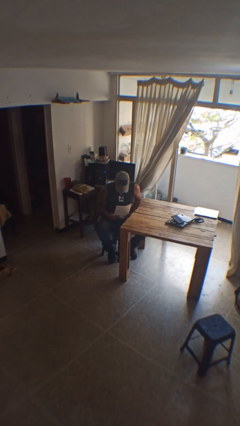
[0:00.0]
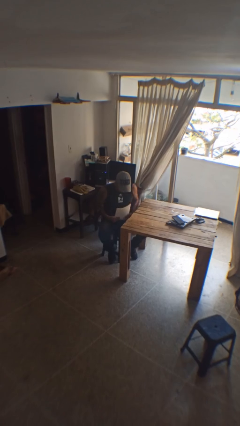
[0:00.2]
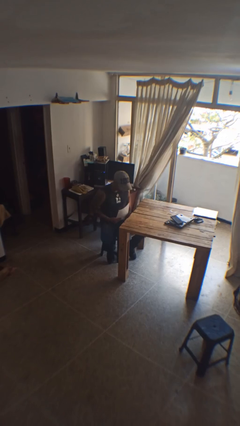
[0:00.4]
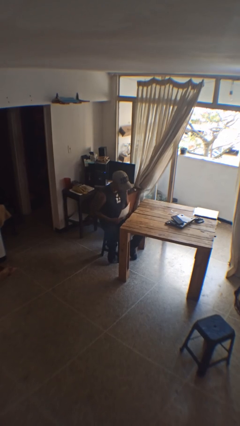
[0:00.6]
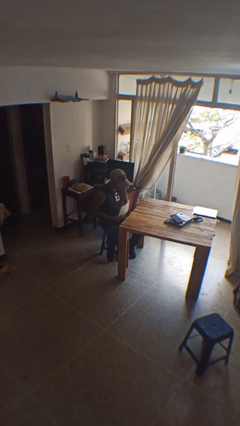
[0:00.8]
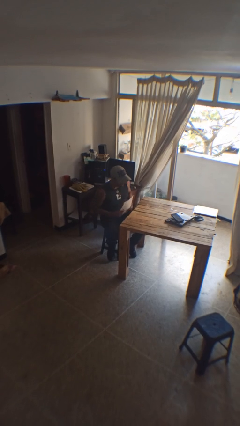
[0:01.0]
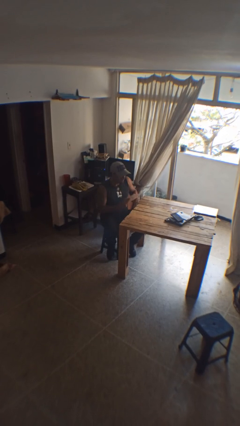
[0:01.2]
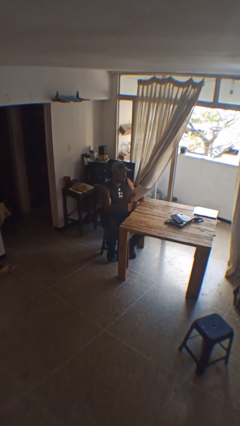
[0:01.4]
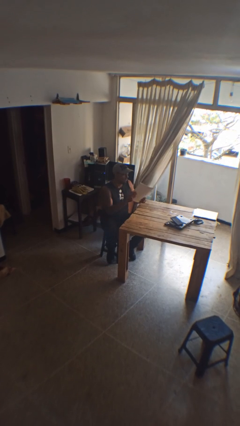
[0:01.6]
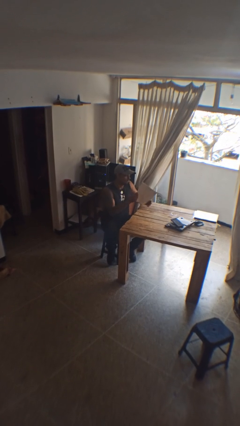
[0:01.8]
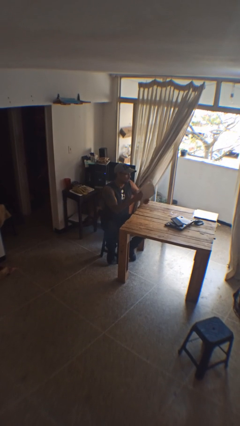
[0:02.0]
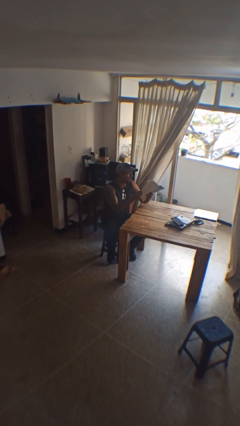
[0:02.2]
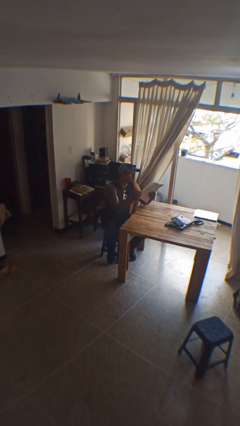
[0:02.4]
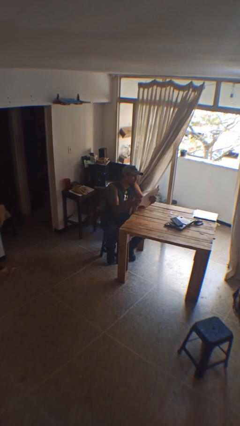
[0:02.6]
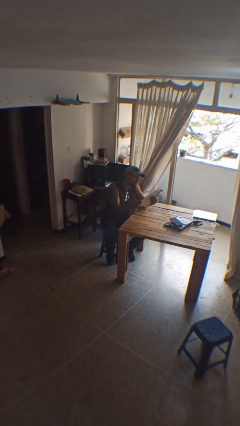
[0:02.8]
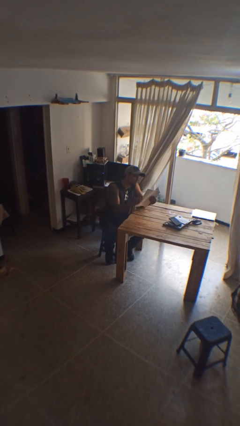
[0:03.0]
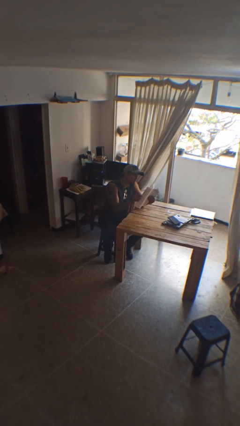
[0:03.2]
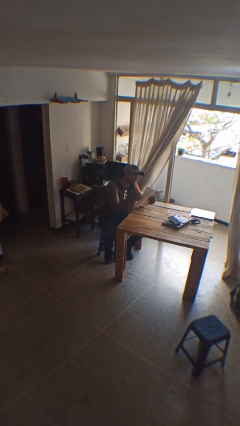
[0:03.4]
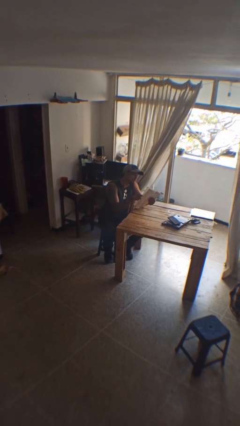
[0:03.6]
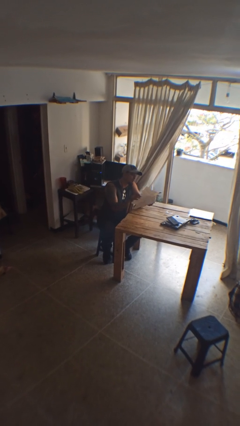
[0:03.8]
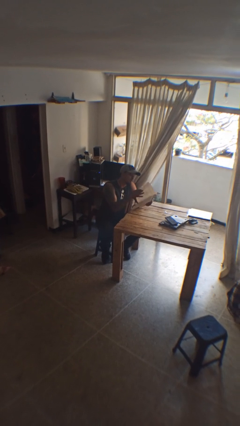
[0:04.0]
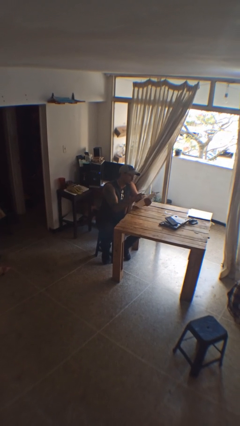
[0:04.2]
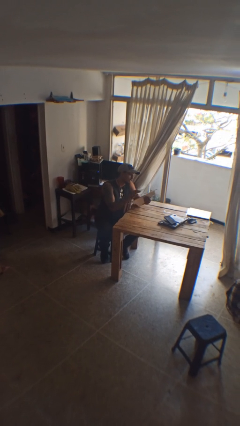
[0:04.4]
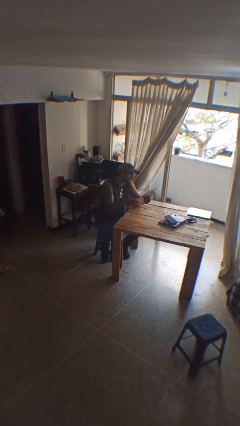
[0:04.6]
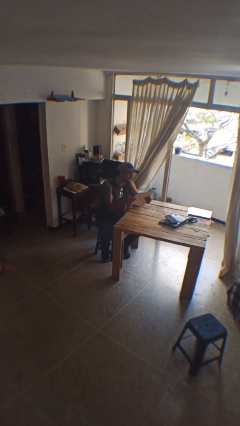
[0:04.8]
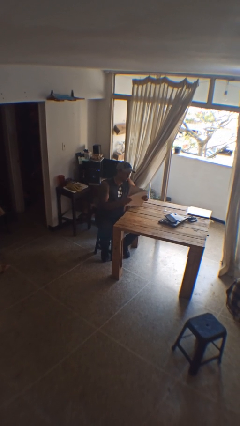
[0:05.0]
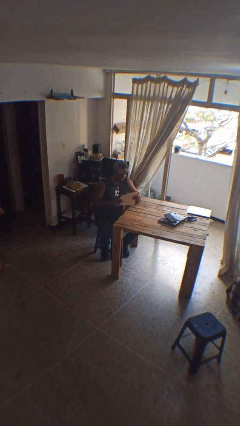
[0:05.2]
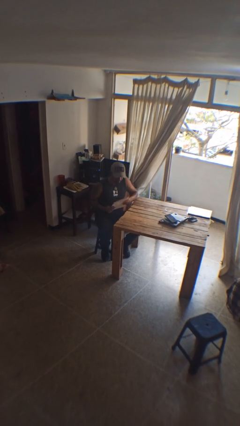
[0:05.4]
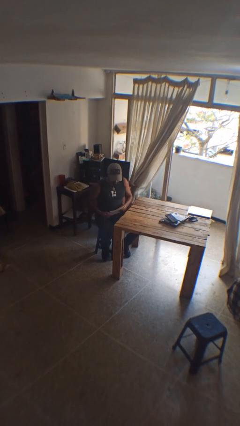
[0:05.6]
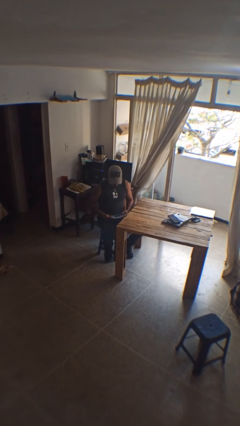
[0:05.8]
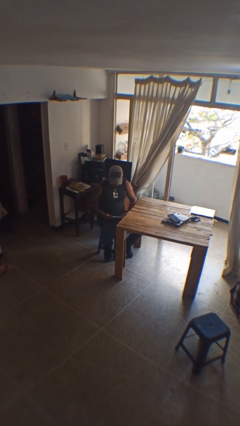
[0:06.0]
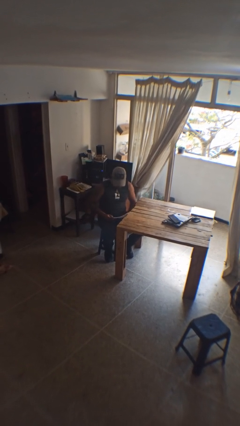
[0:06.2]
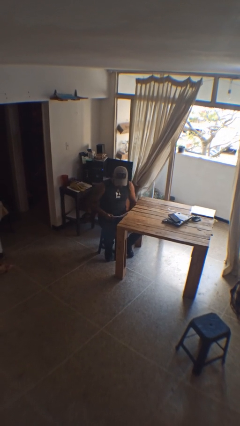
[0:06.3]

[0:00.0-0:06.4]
person reads document

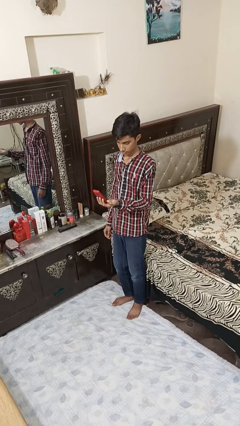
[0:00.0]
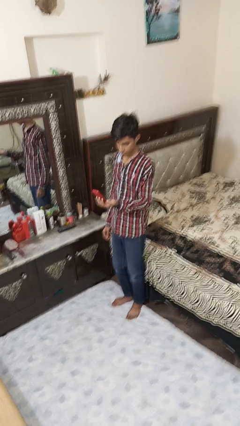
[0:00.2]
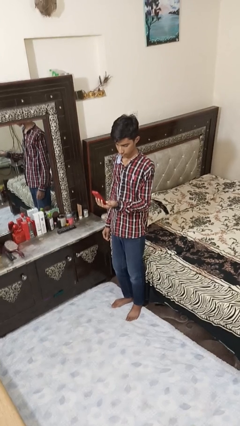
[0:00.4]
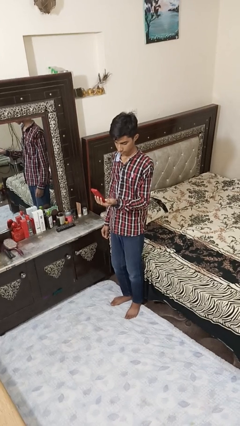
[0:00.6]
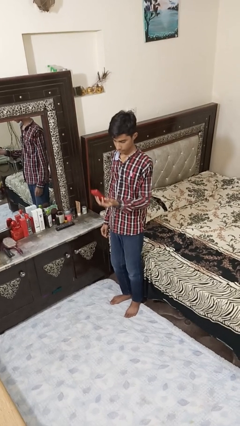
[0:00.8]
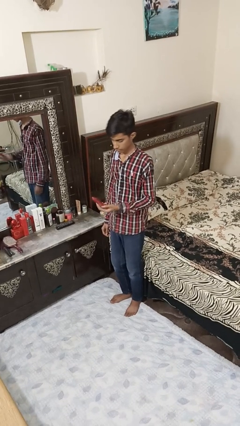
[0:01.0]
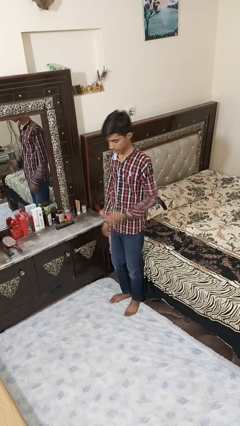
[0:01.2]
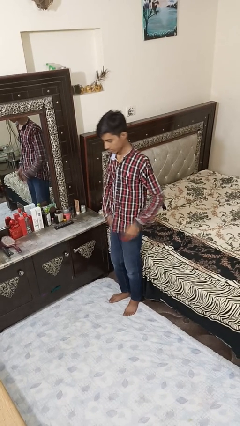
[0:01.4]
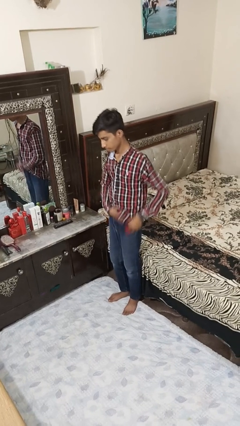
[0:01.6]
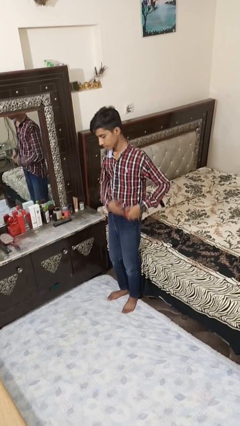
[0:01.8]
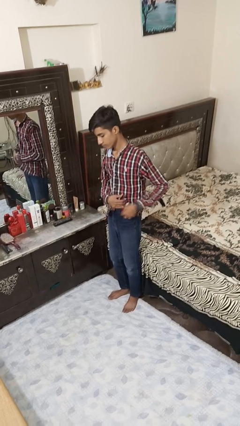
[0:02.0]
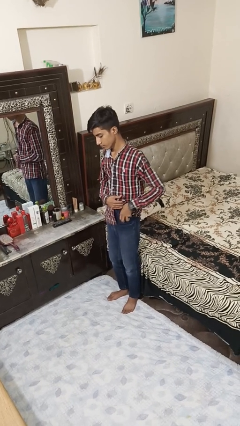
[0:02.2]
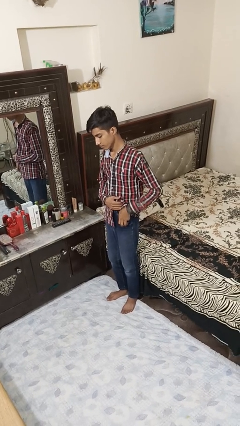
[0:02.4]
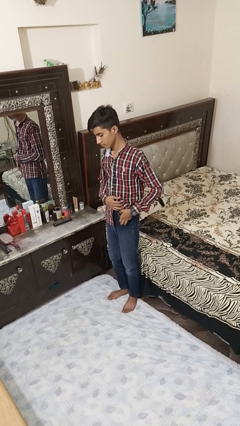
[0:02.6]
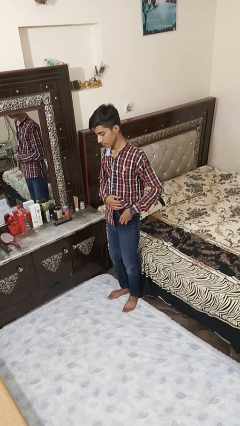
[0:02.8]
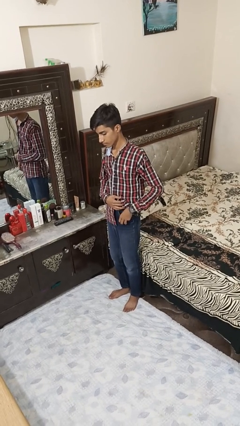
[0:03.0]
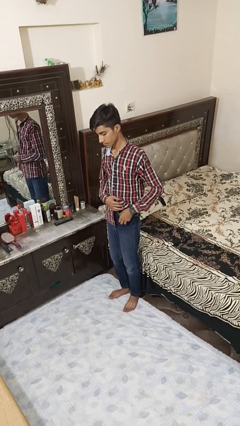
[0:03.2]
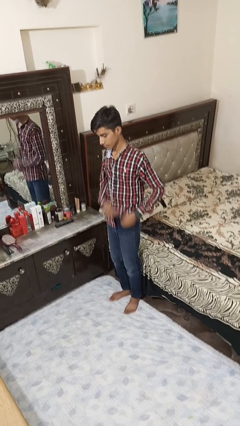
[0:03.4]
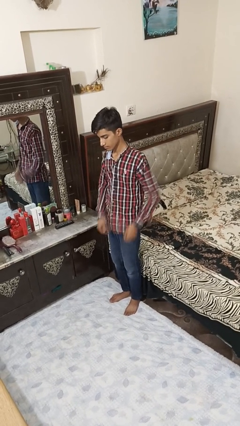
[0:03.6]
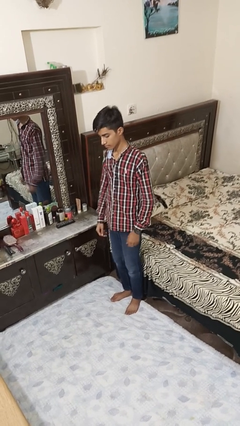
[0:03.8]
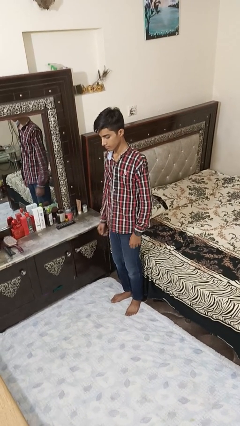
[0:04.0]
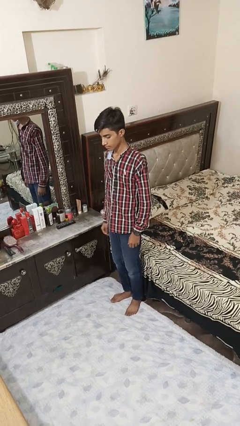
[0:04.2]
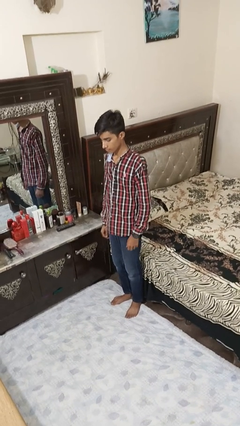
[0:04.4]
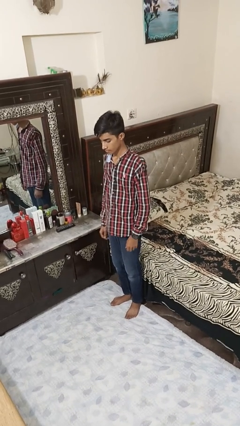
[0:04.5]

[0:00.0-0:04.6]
person puts phone into pocket

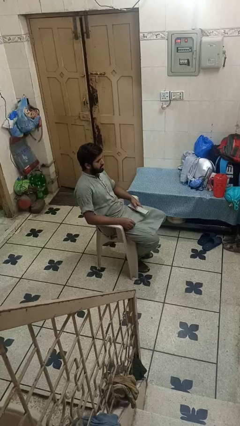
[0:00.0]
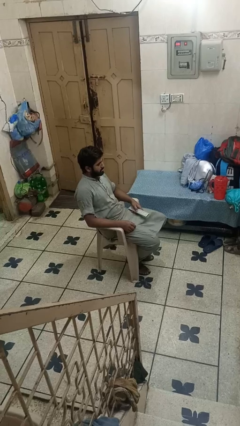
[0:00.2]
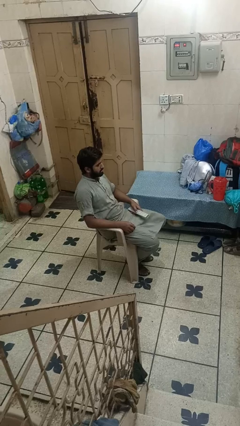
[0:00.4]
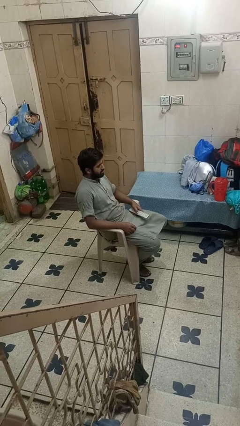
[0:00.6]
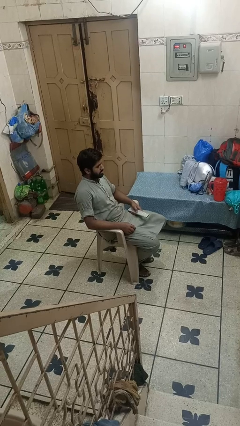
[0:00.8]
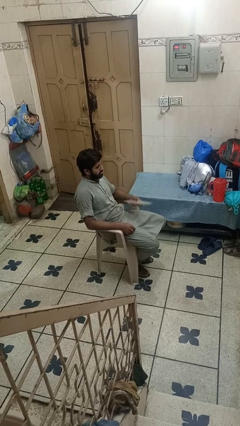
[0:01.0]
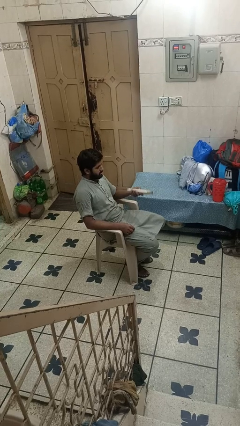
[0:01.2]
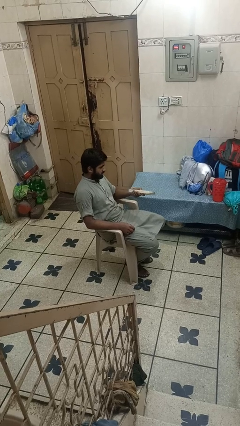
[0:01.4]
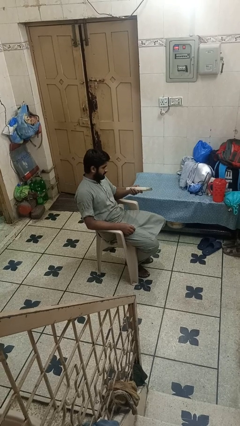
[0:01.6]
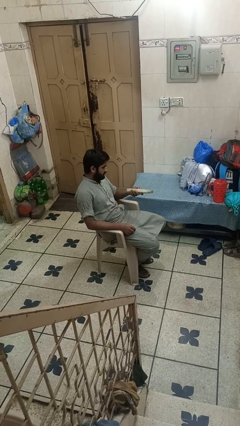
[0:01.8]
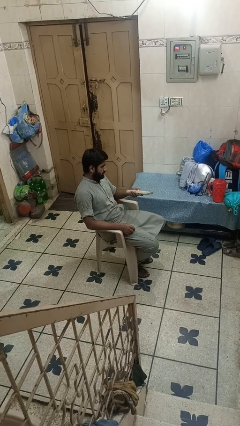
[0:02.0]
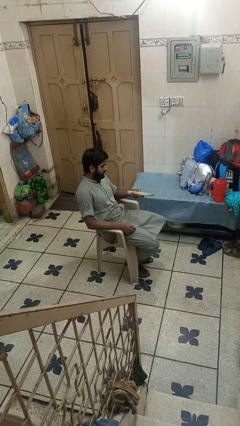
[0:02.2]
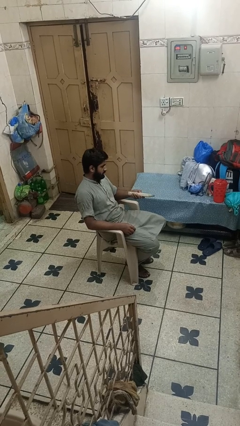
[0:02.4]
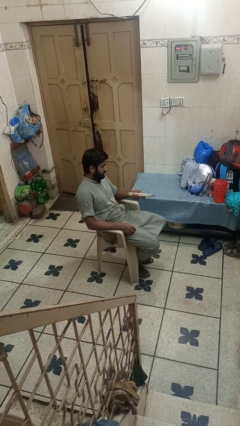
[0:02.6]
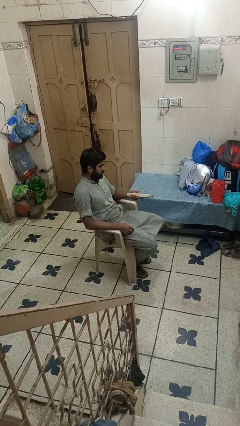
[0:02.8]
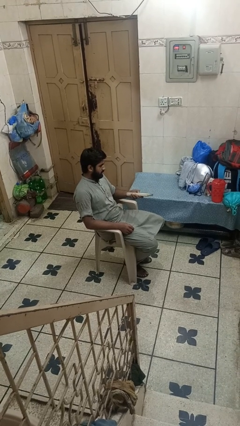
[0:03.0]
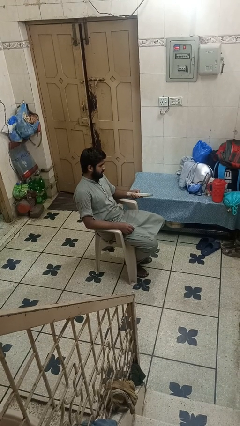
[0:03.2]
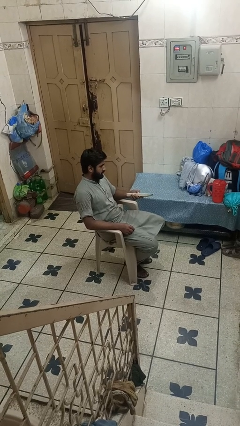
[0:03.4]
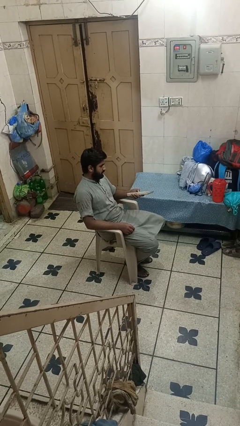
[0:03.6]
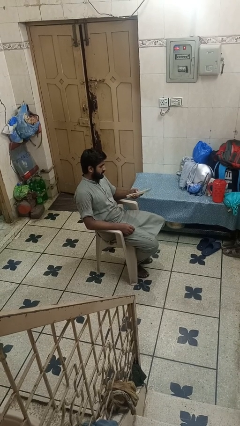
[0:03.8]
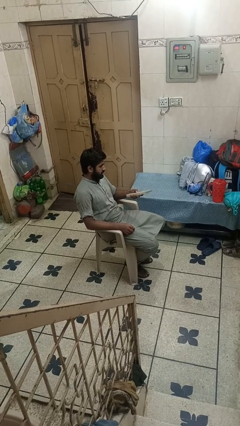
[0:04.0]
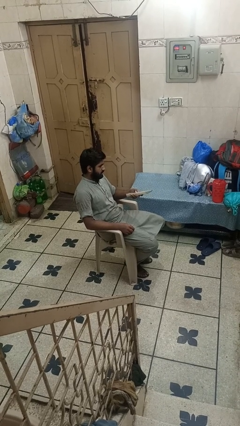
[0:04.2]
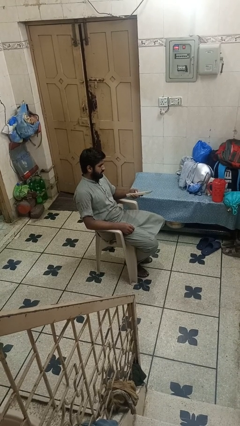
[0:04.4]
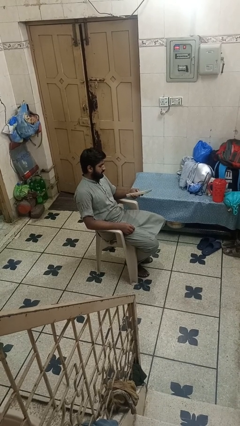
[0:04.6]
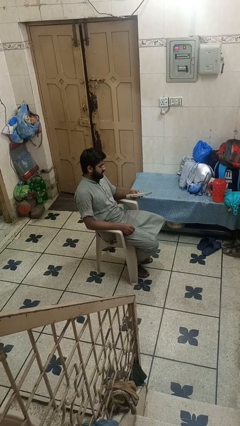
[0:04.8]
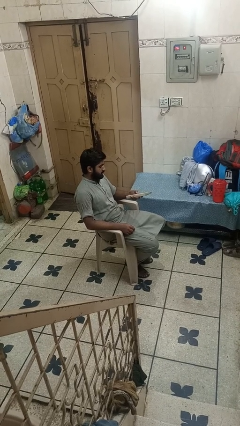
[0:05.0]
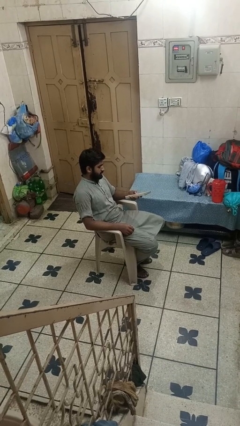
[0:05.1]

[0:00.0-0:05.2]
person uses television remote

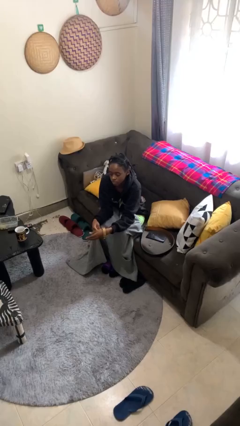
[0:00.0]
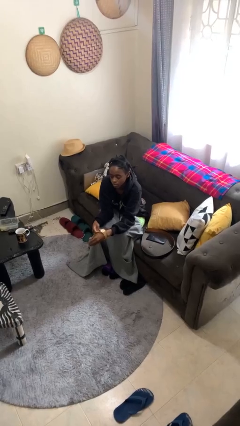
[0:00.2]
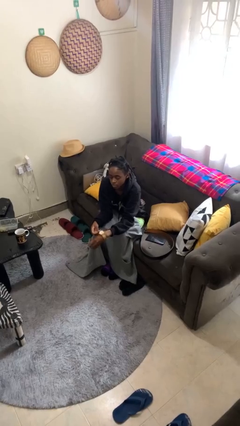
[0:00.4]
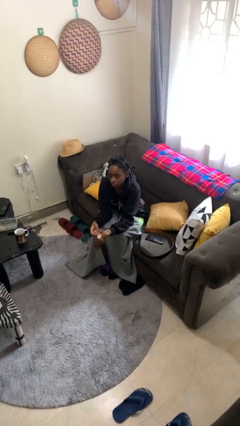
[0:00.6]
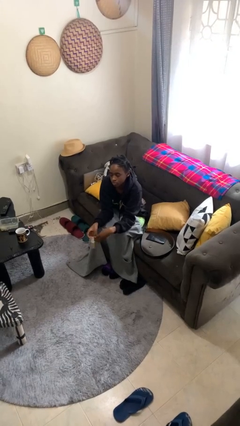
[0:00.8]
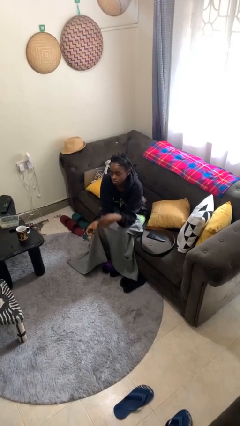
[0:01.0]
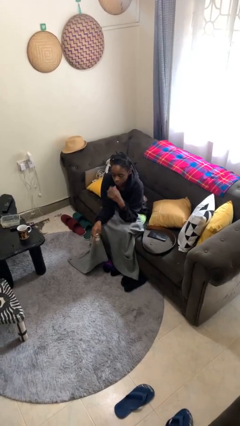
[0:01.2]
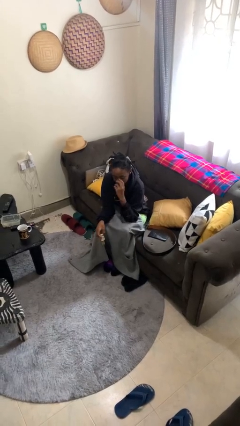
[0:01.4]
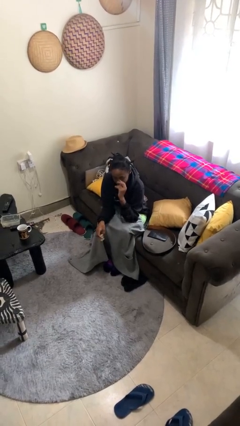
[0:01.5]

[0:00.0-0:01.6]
person takes off wristwatch
